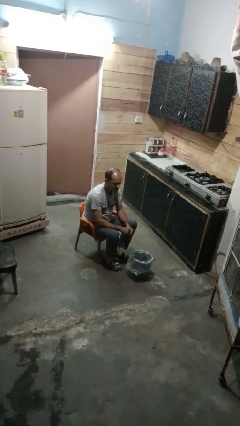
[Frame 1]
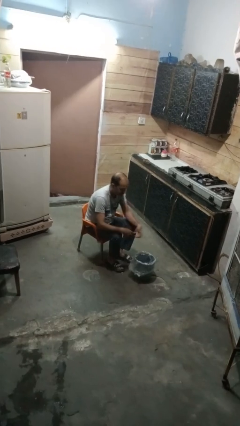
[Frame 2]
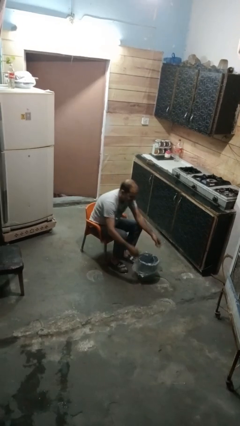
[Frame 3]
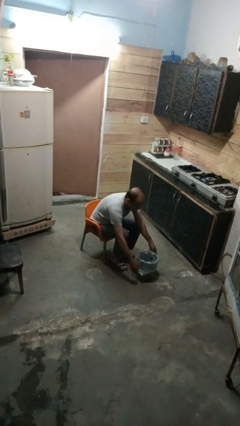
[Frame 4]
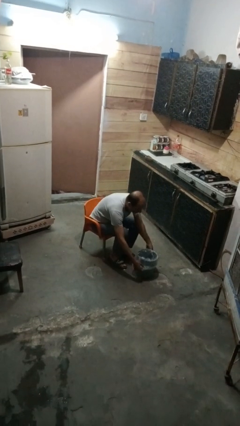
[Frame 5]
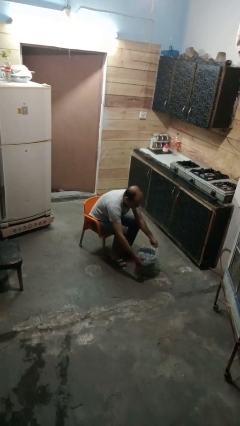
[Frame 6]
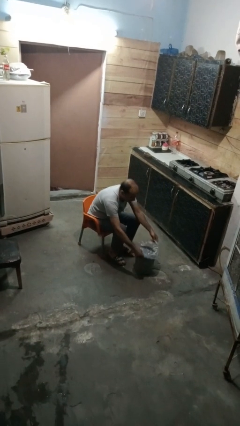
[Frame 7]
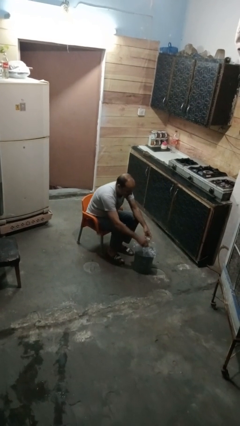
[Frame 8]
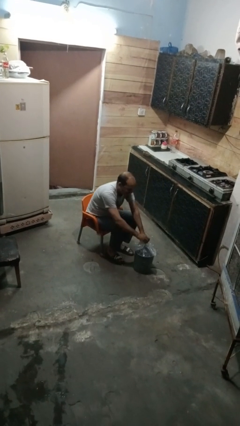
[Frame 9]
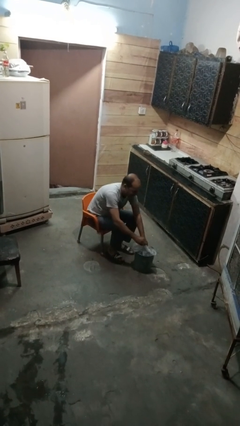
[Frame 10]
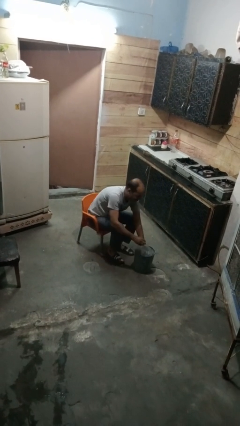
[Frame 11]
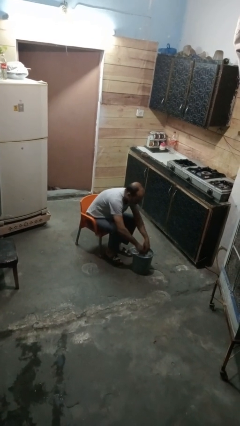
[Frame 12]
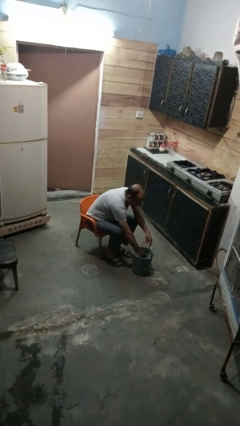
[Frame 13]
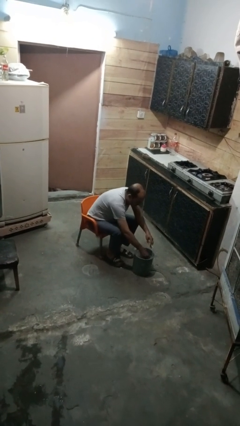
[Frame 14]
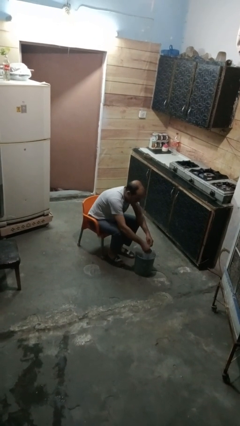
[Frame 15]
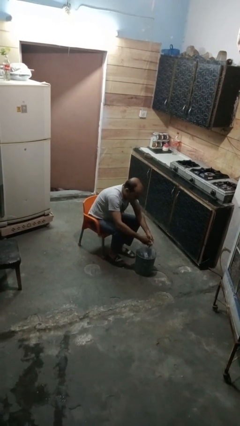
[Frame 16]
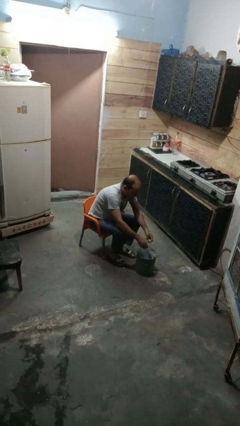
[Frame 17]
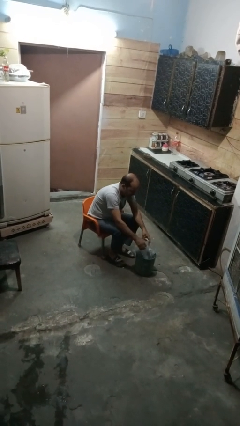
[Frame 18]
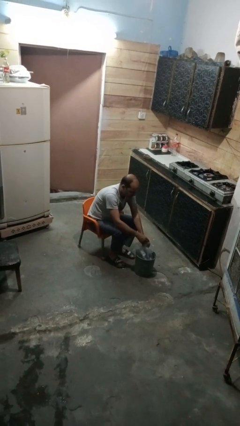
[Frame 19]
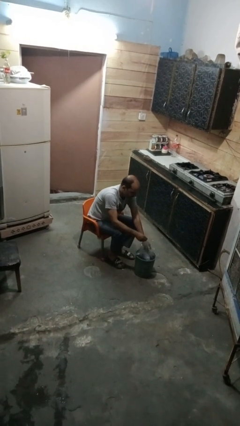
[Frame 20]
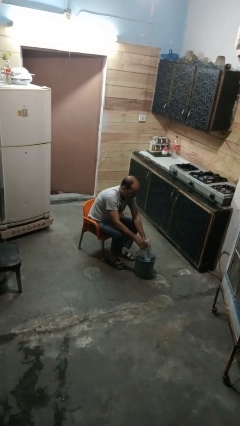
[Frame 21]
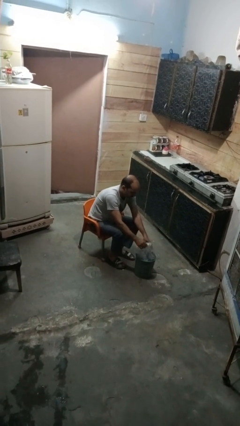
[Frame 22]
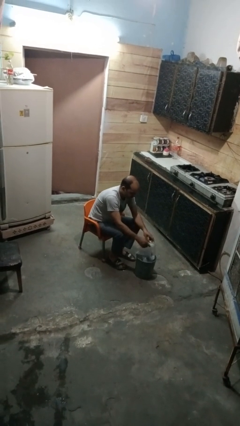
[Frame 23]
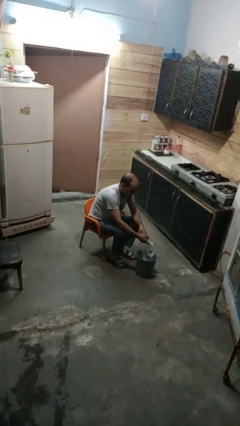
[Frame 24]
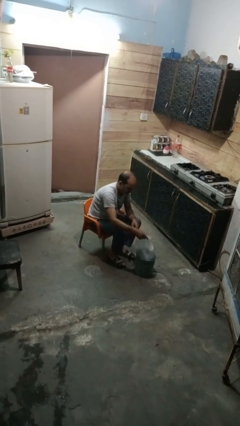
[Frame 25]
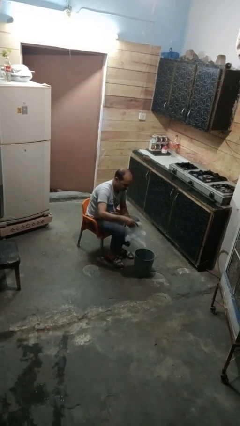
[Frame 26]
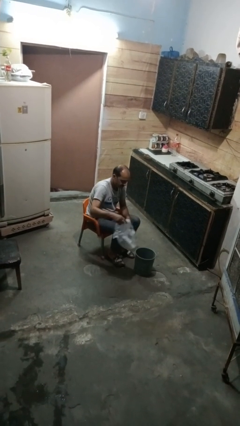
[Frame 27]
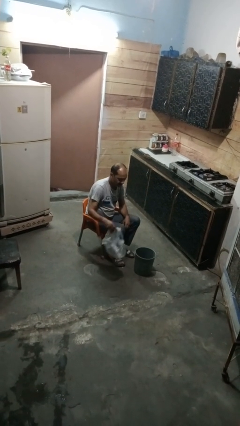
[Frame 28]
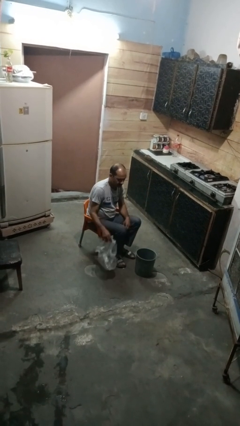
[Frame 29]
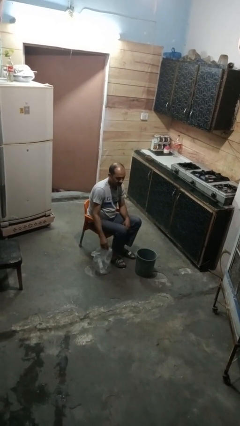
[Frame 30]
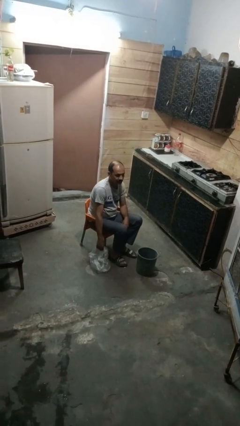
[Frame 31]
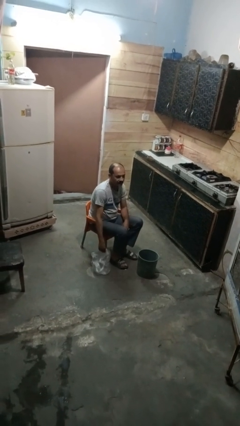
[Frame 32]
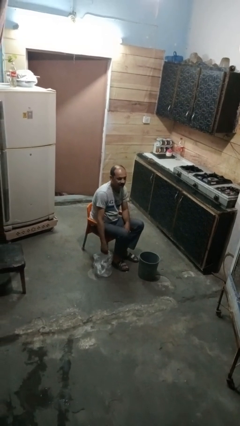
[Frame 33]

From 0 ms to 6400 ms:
person removes trashbag from trashcan

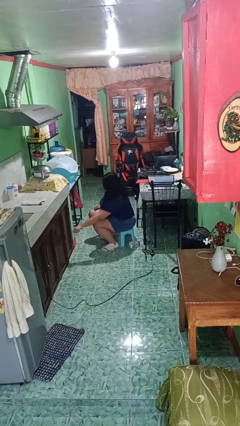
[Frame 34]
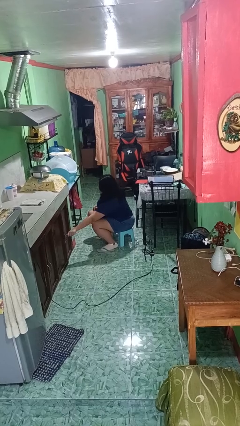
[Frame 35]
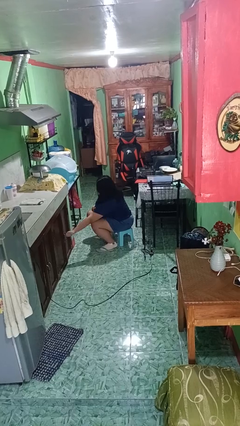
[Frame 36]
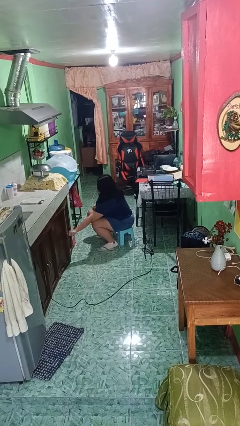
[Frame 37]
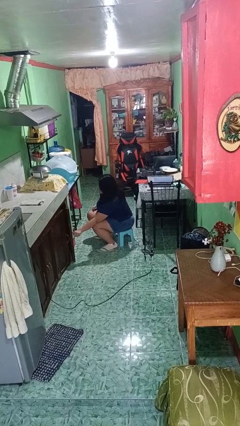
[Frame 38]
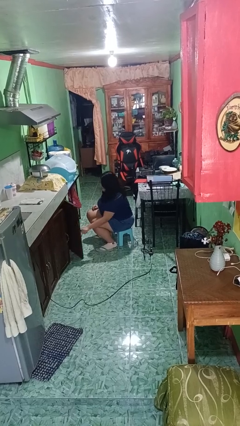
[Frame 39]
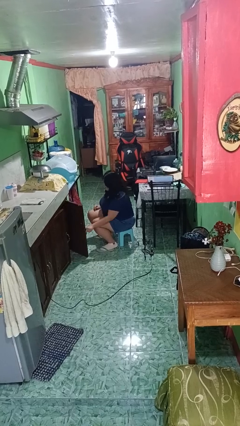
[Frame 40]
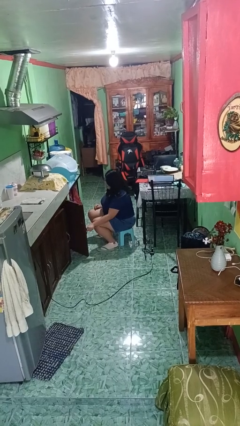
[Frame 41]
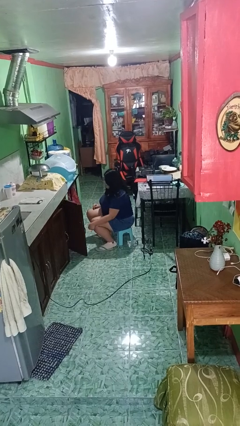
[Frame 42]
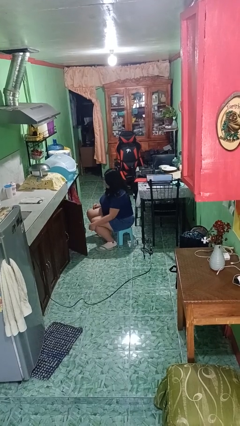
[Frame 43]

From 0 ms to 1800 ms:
person opens cabinet

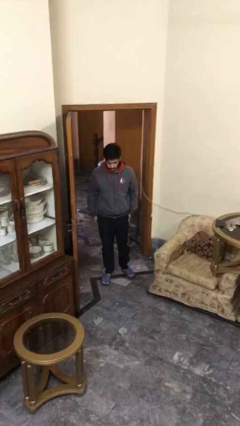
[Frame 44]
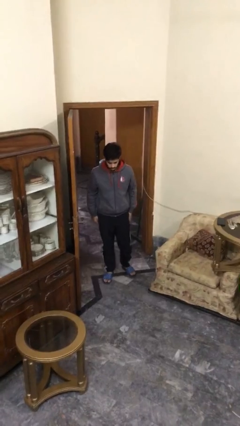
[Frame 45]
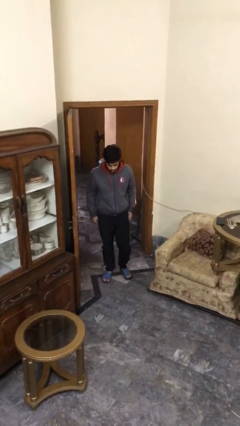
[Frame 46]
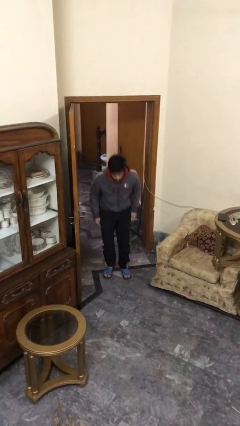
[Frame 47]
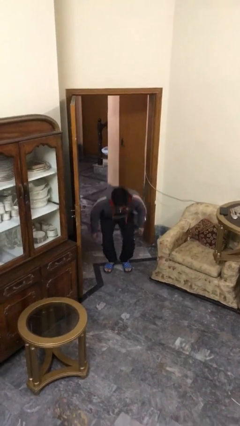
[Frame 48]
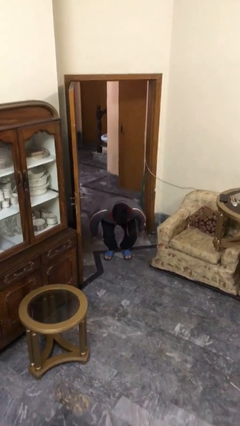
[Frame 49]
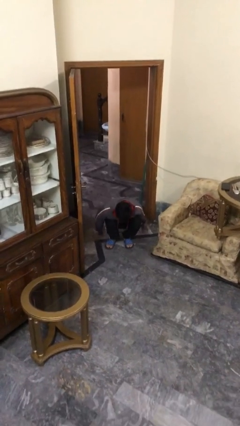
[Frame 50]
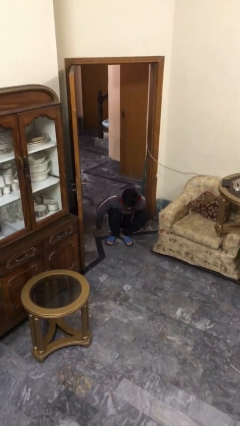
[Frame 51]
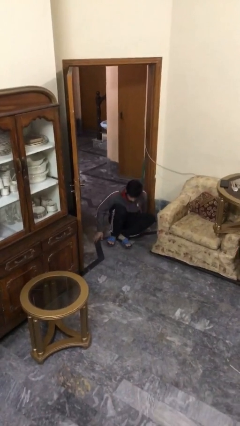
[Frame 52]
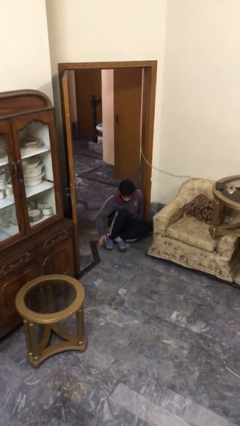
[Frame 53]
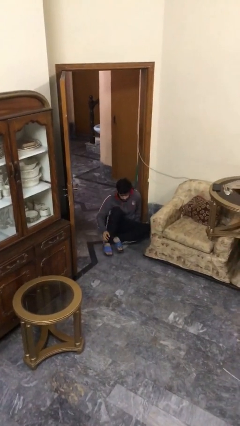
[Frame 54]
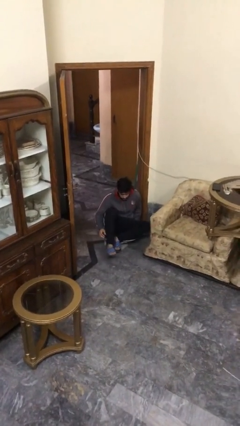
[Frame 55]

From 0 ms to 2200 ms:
person sits down

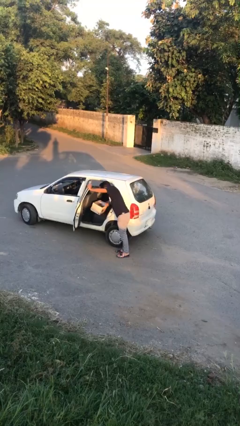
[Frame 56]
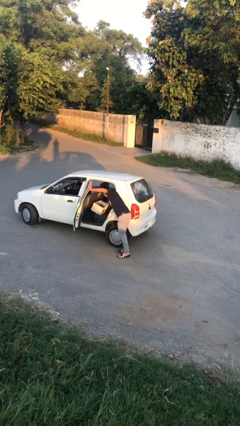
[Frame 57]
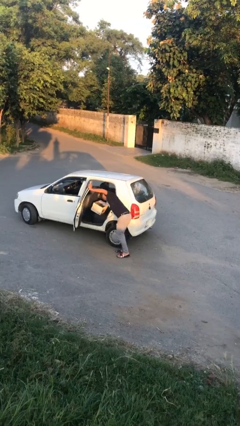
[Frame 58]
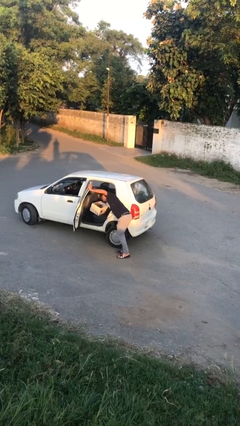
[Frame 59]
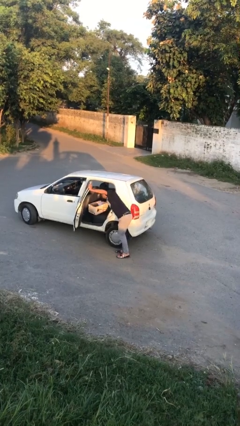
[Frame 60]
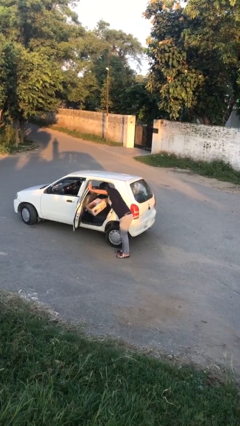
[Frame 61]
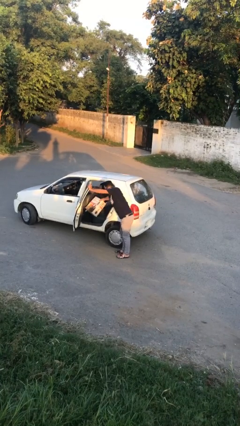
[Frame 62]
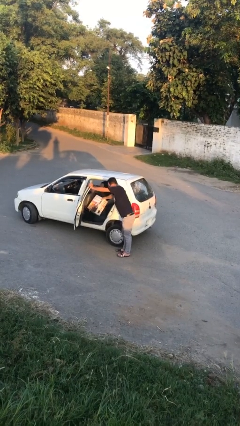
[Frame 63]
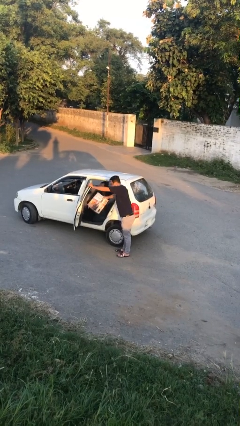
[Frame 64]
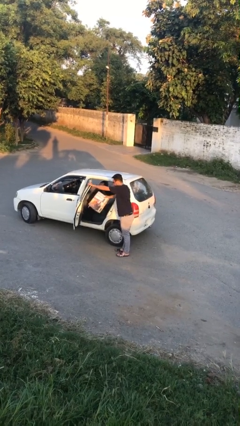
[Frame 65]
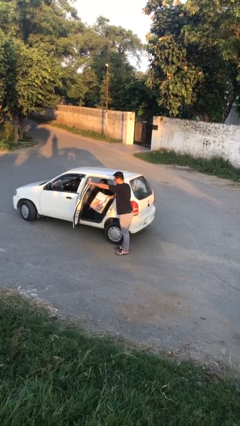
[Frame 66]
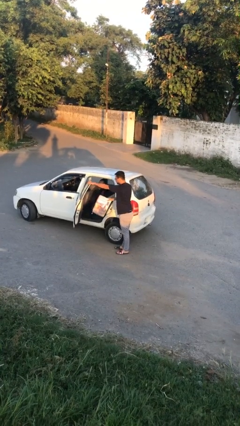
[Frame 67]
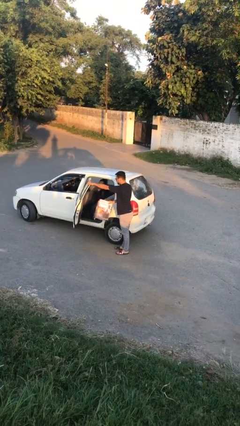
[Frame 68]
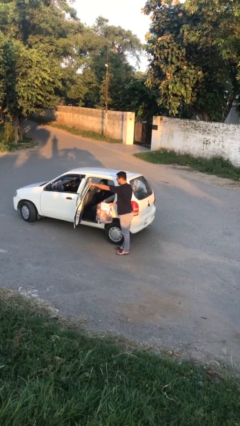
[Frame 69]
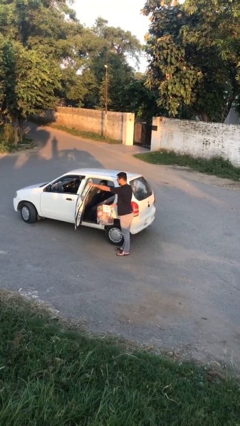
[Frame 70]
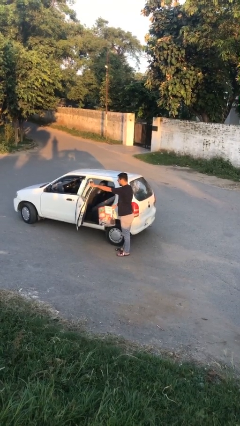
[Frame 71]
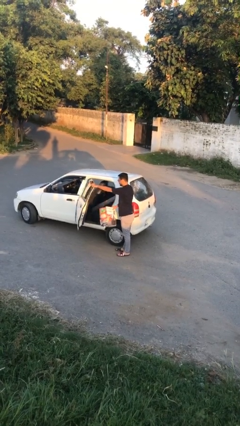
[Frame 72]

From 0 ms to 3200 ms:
person unloads car

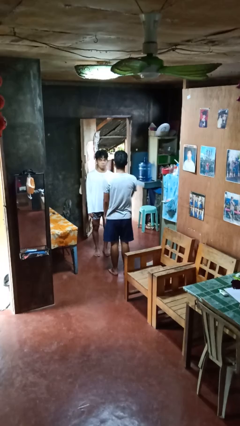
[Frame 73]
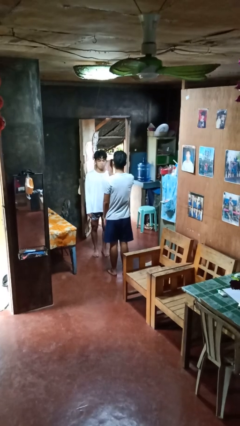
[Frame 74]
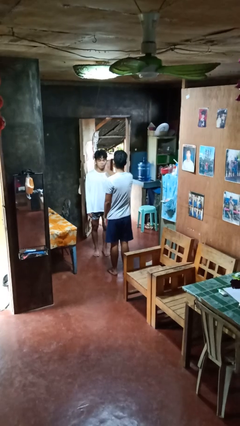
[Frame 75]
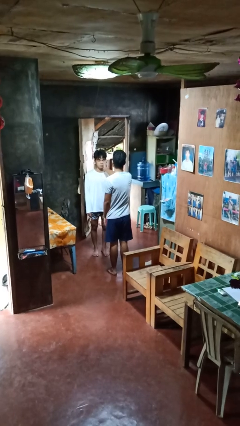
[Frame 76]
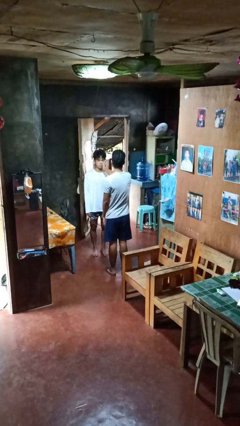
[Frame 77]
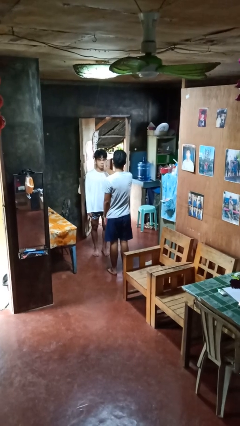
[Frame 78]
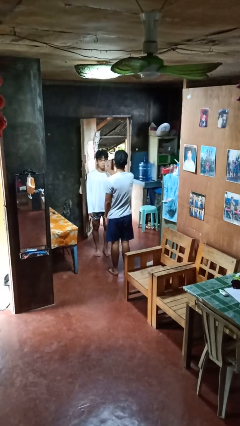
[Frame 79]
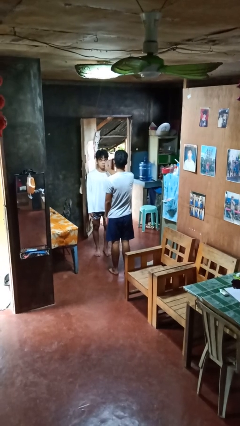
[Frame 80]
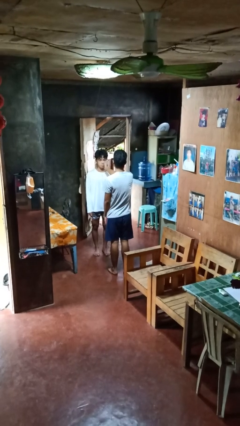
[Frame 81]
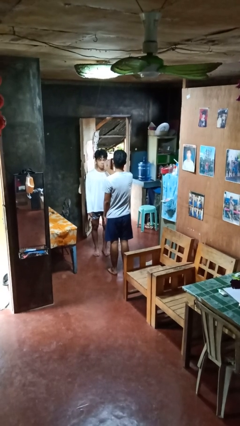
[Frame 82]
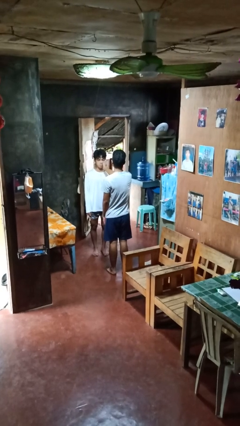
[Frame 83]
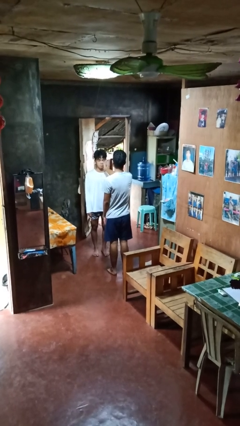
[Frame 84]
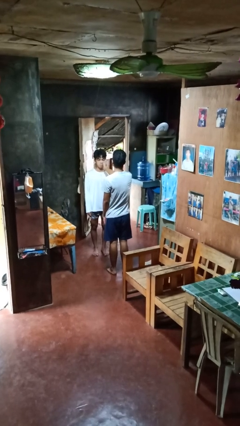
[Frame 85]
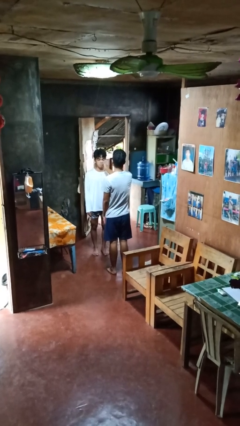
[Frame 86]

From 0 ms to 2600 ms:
person touches face of person

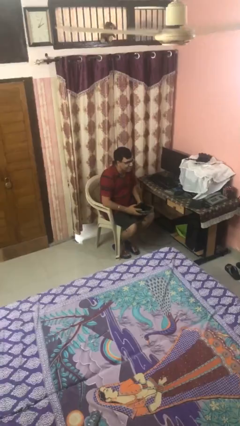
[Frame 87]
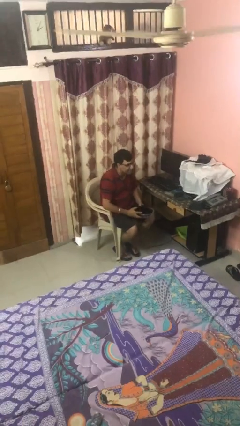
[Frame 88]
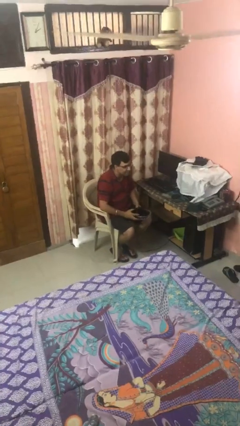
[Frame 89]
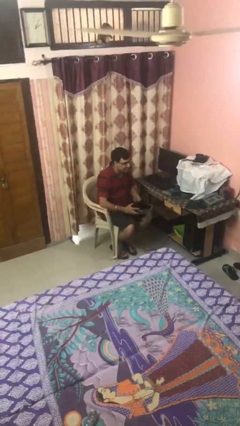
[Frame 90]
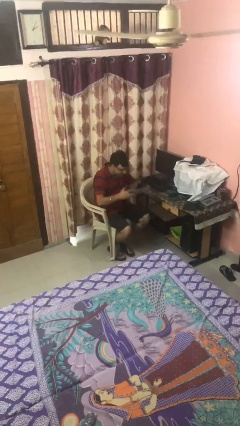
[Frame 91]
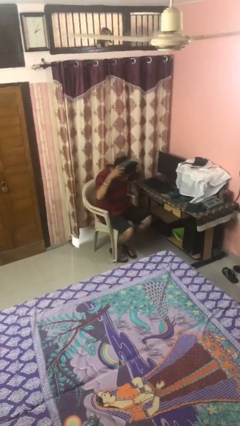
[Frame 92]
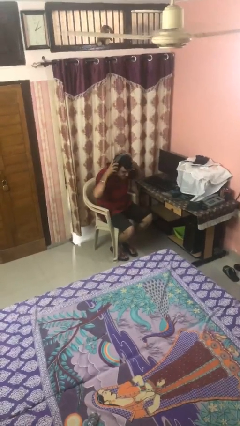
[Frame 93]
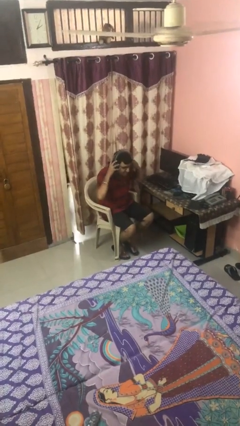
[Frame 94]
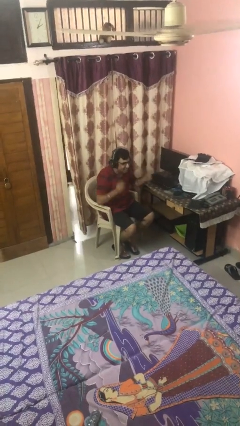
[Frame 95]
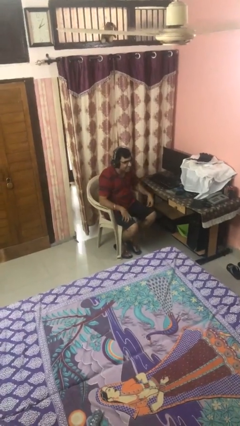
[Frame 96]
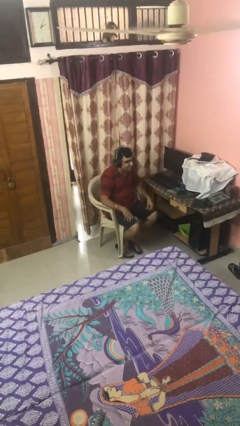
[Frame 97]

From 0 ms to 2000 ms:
person puts on headphones
